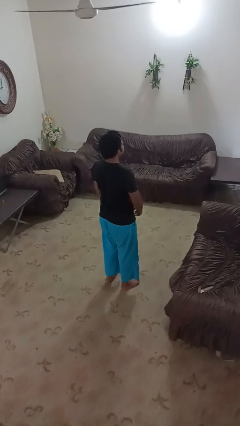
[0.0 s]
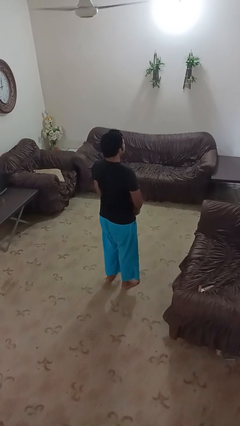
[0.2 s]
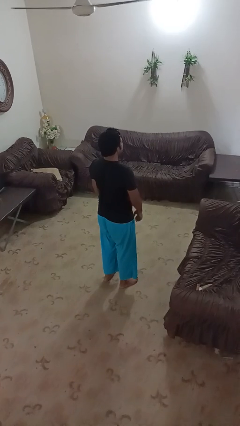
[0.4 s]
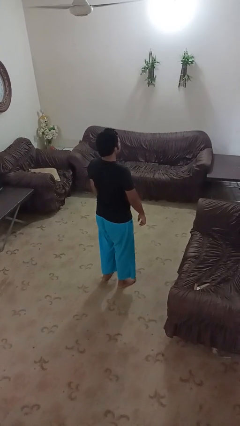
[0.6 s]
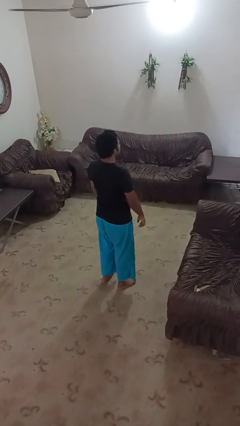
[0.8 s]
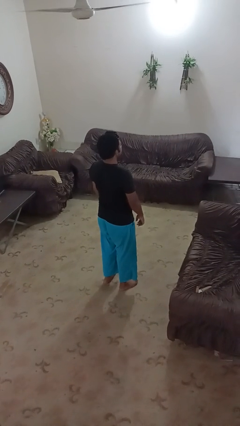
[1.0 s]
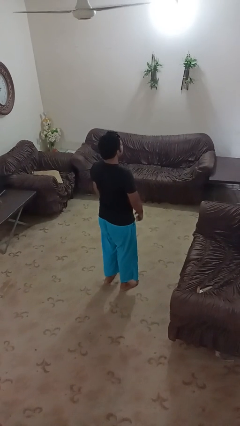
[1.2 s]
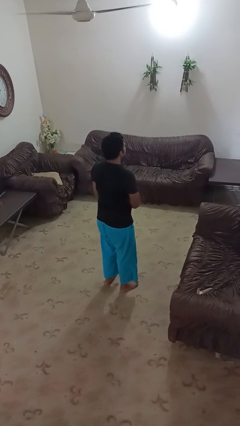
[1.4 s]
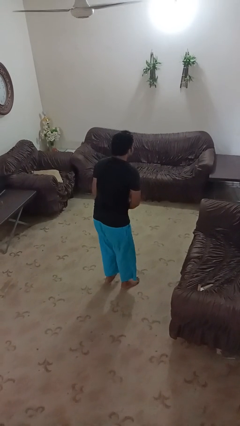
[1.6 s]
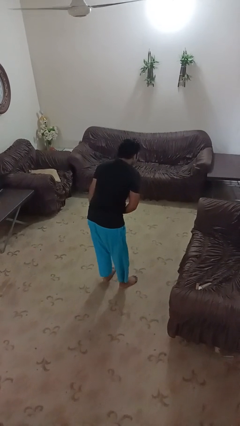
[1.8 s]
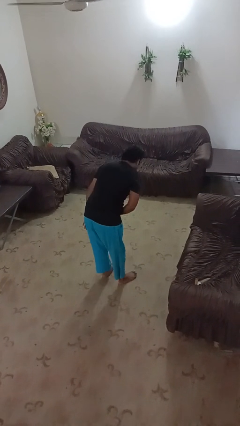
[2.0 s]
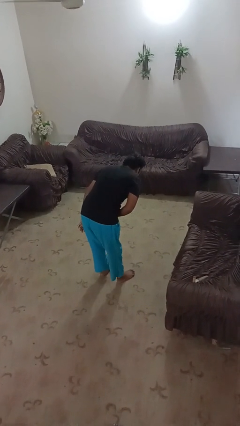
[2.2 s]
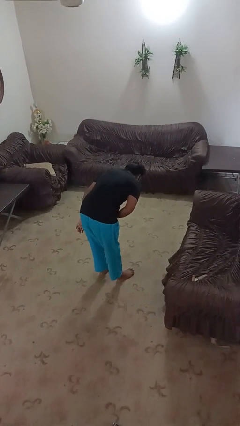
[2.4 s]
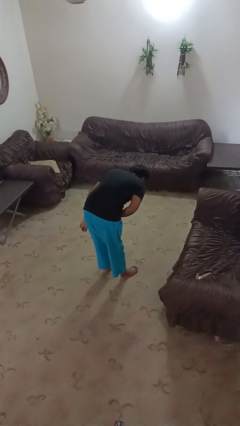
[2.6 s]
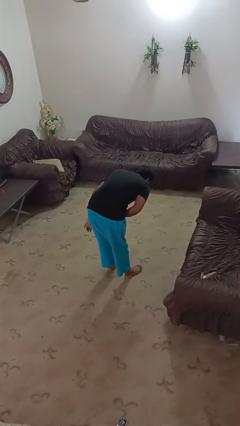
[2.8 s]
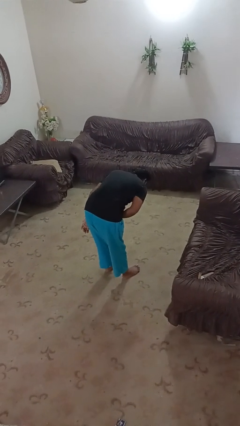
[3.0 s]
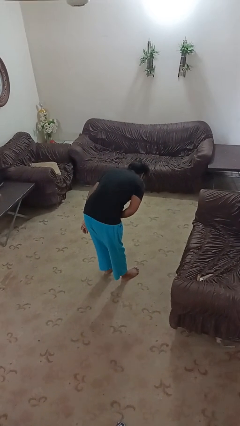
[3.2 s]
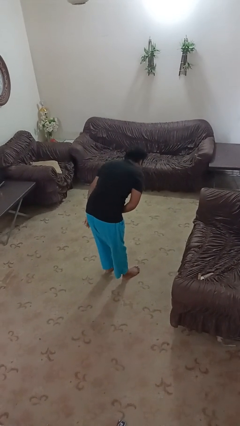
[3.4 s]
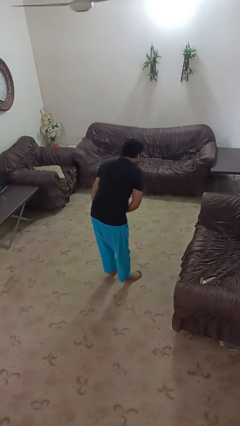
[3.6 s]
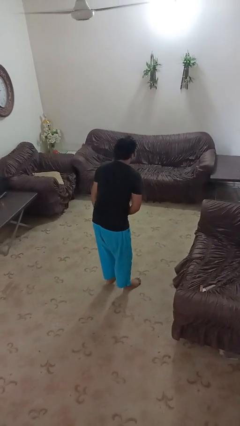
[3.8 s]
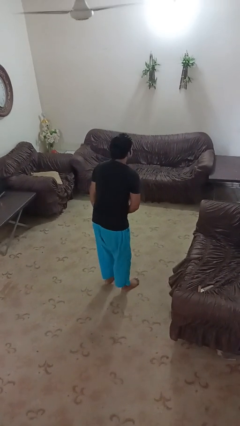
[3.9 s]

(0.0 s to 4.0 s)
person bows

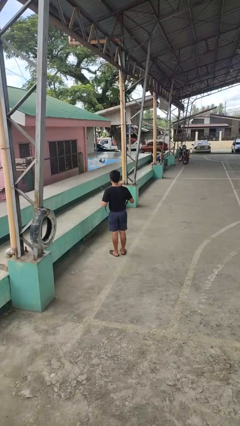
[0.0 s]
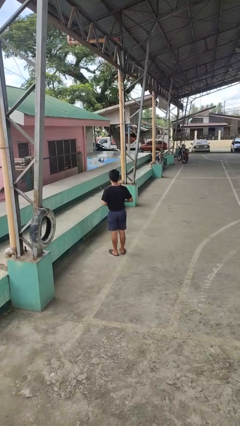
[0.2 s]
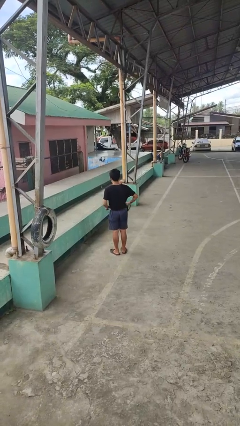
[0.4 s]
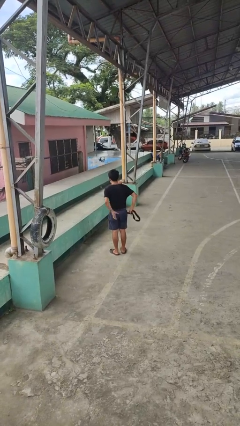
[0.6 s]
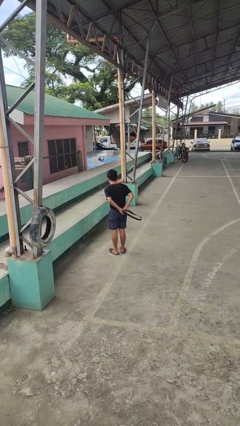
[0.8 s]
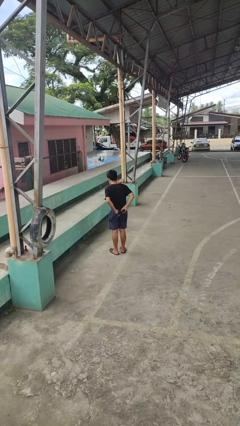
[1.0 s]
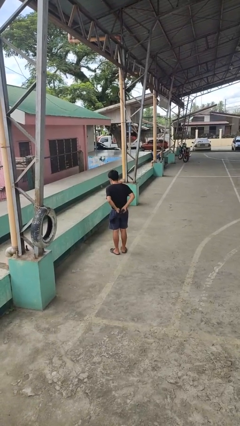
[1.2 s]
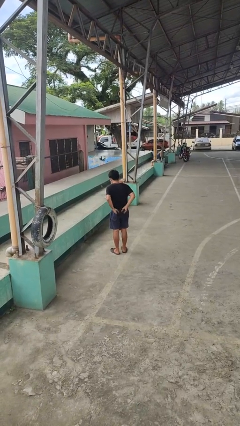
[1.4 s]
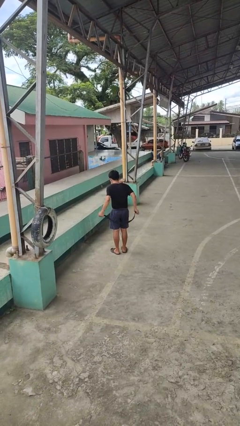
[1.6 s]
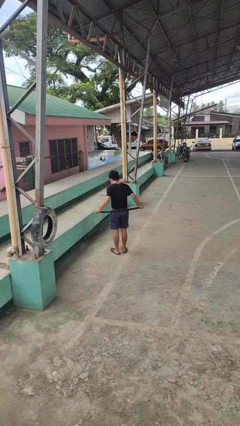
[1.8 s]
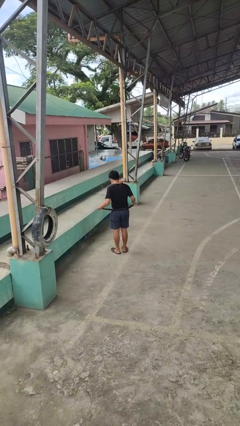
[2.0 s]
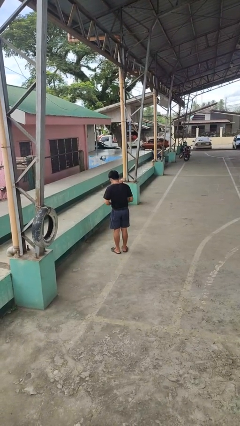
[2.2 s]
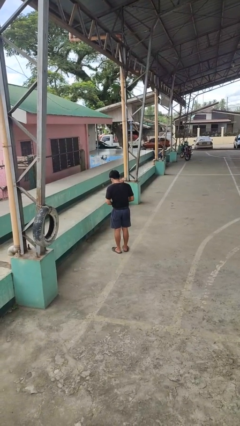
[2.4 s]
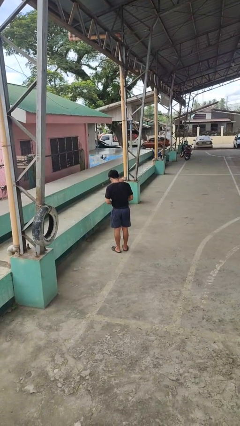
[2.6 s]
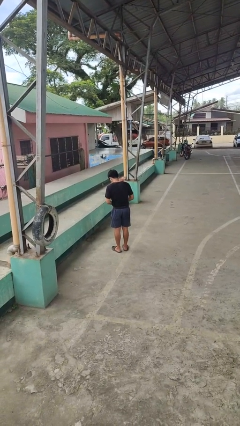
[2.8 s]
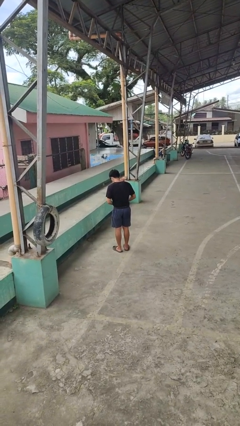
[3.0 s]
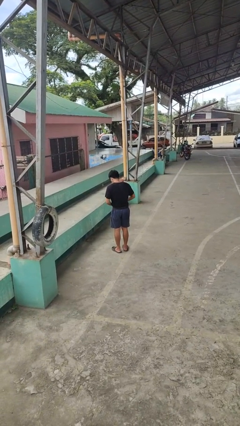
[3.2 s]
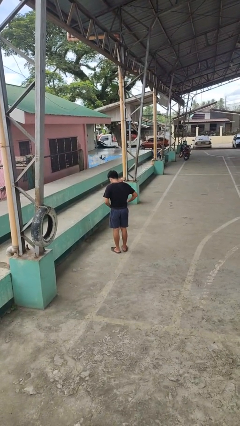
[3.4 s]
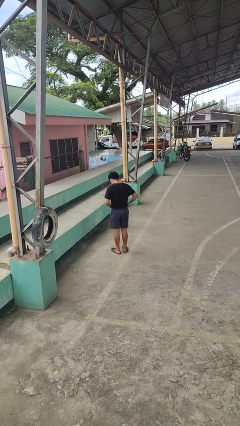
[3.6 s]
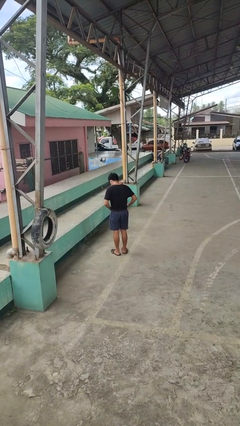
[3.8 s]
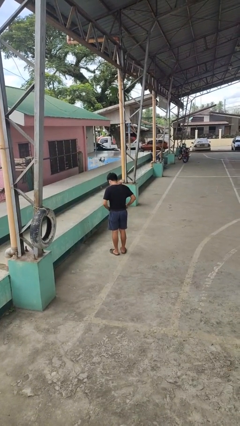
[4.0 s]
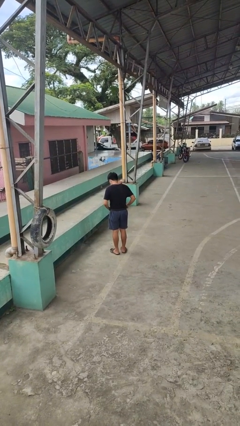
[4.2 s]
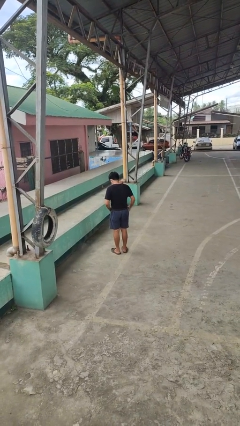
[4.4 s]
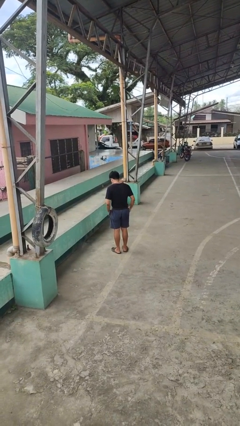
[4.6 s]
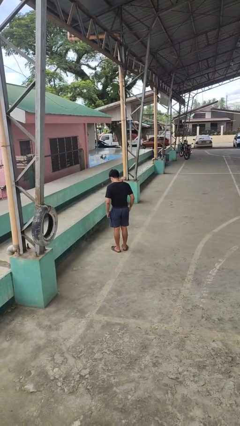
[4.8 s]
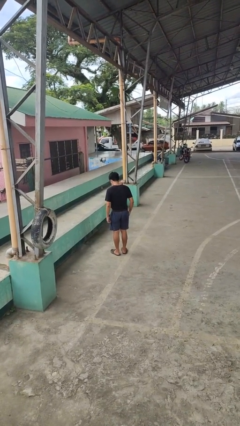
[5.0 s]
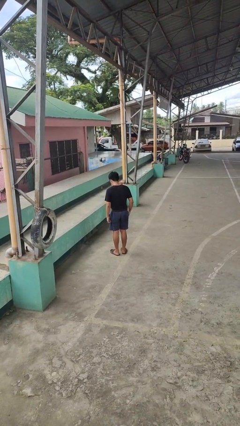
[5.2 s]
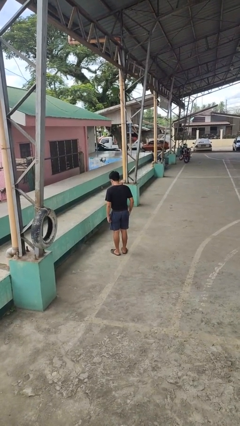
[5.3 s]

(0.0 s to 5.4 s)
person puts on belt

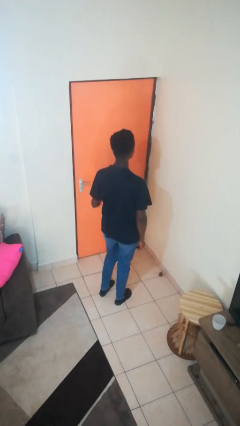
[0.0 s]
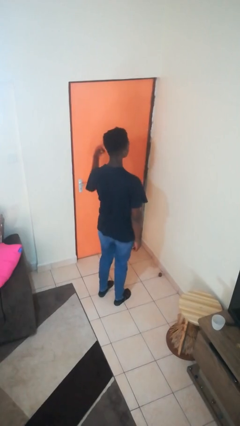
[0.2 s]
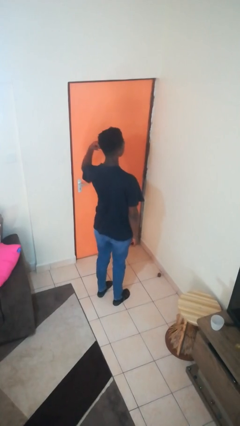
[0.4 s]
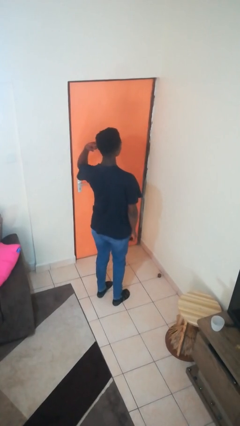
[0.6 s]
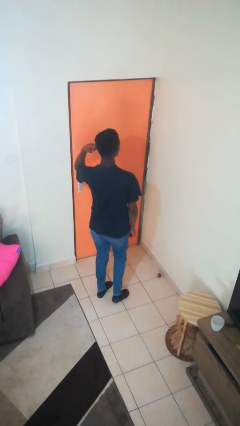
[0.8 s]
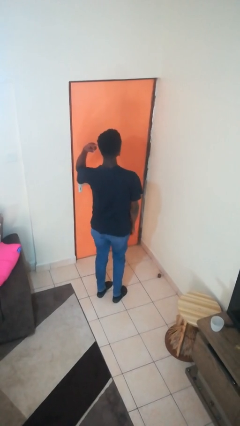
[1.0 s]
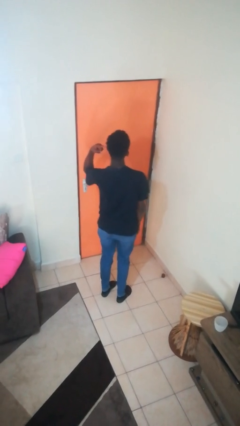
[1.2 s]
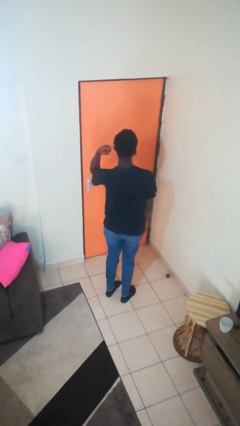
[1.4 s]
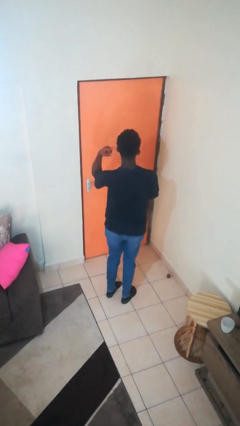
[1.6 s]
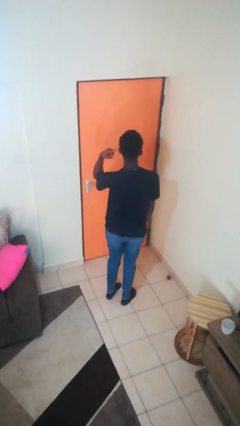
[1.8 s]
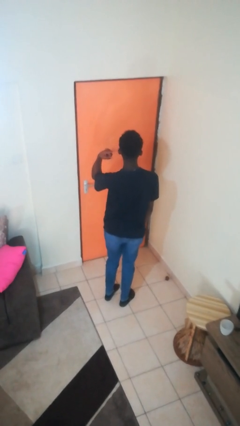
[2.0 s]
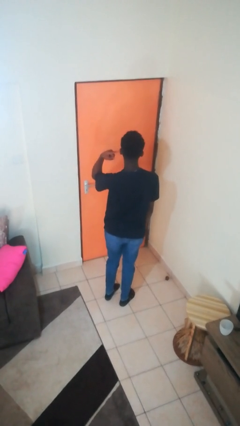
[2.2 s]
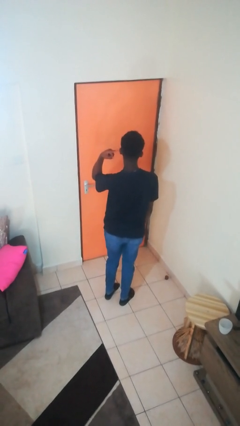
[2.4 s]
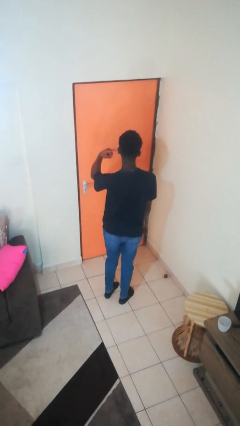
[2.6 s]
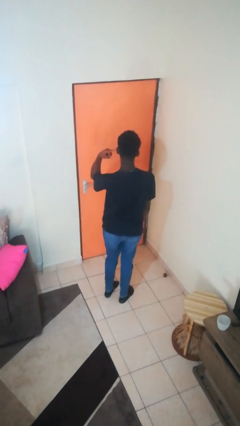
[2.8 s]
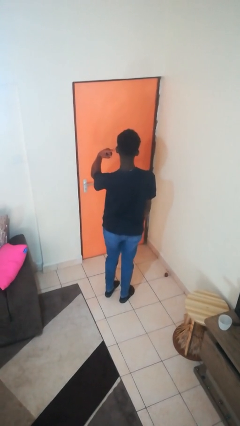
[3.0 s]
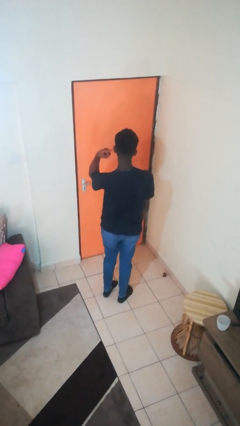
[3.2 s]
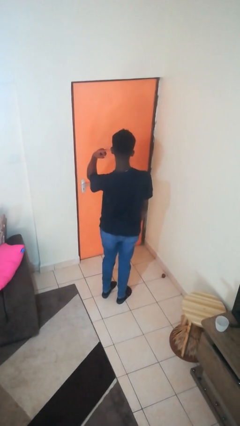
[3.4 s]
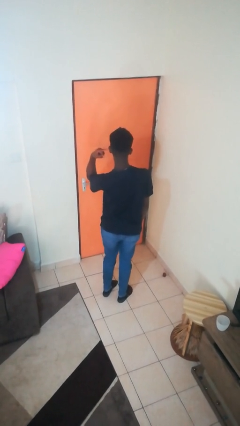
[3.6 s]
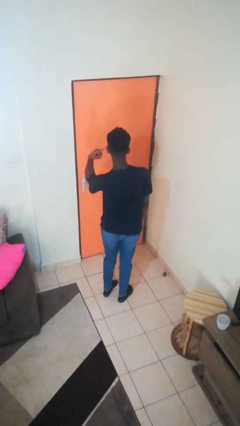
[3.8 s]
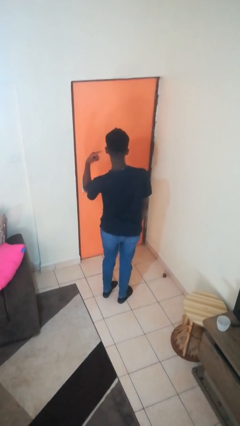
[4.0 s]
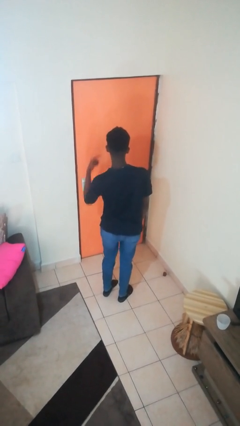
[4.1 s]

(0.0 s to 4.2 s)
person gestures listen closely

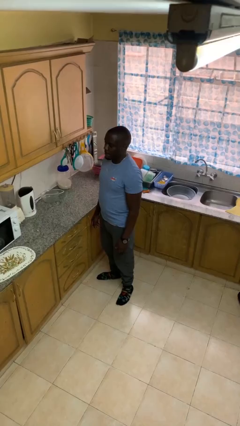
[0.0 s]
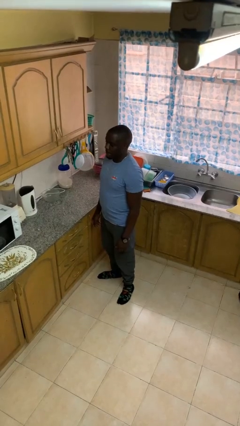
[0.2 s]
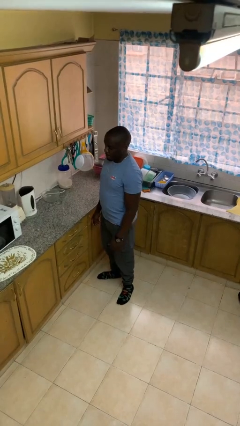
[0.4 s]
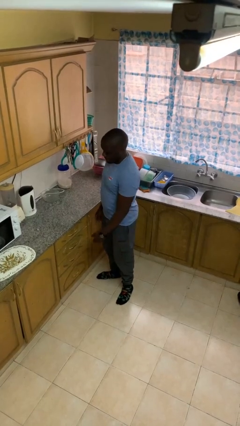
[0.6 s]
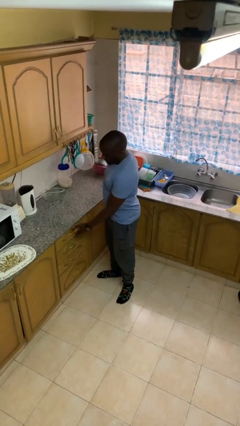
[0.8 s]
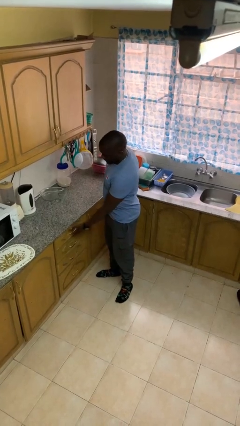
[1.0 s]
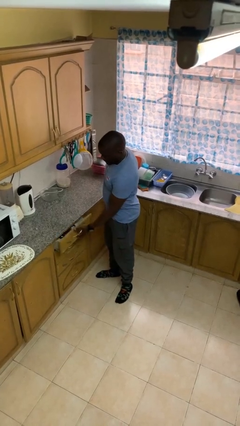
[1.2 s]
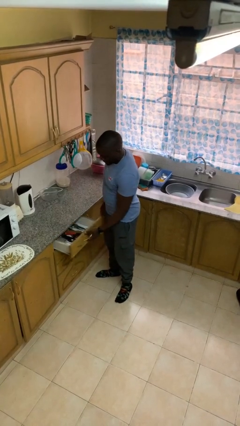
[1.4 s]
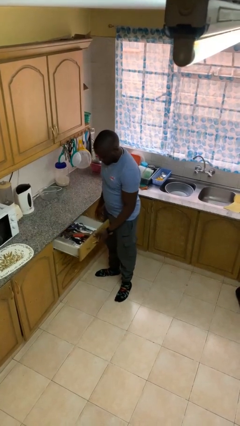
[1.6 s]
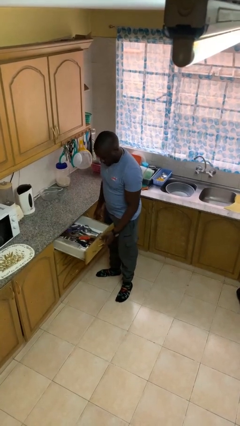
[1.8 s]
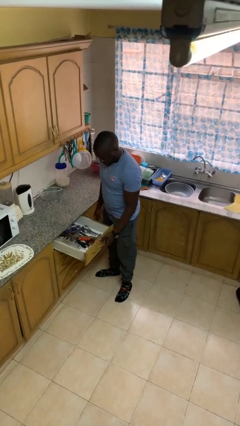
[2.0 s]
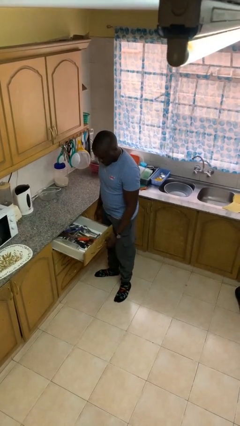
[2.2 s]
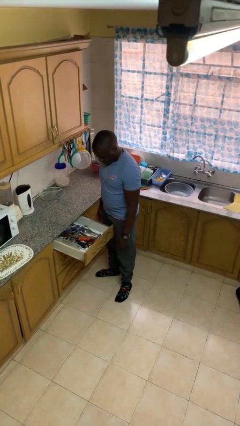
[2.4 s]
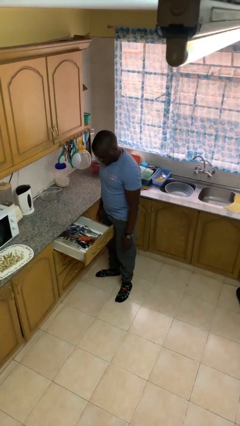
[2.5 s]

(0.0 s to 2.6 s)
person opens kitchen drawer

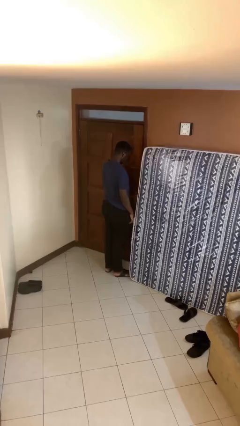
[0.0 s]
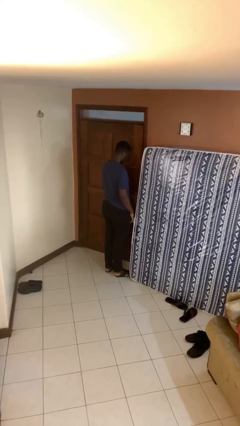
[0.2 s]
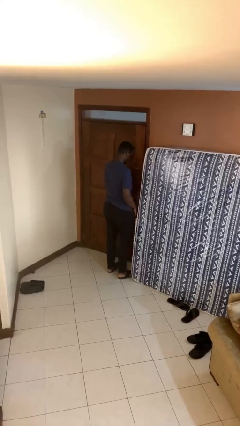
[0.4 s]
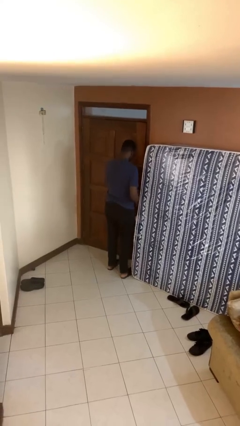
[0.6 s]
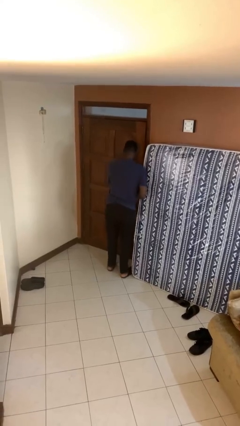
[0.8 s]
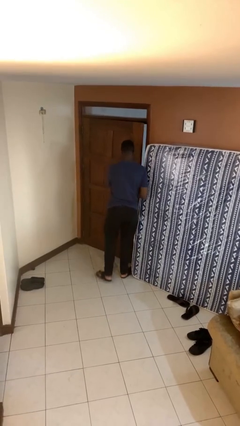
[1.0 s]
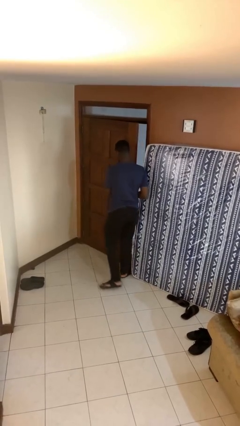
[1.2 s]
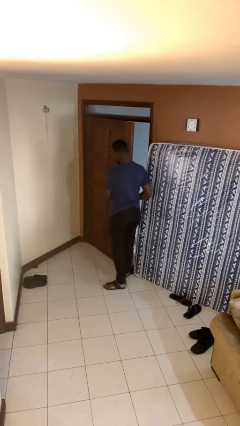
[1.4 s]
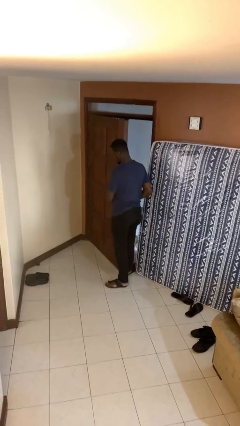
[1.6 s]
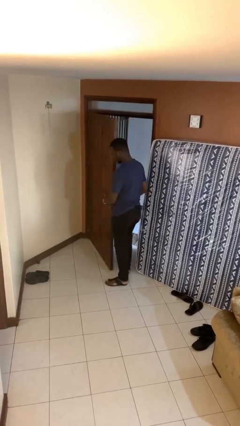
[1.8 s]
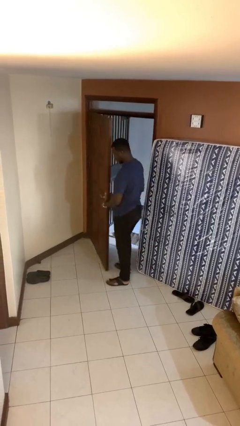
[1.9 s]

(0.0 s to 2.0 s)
person opens facility door
